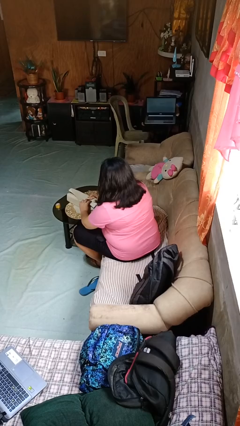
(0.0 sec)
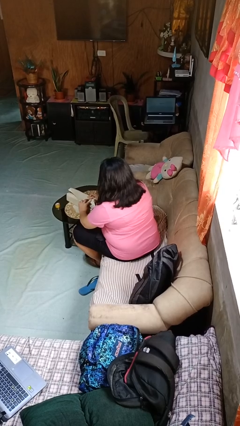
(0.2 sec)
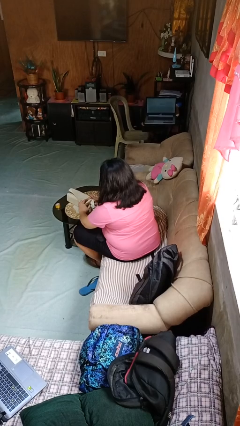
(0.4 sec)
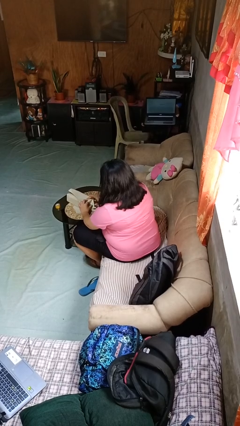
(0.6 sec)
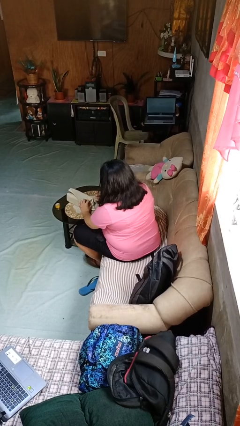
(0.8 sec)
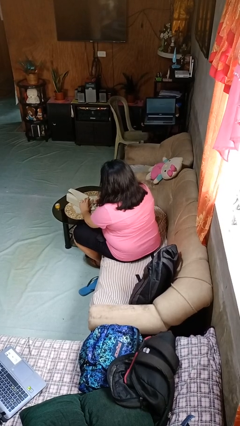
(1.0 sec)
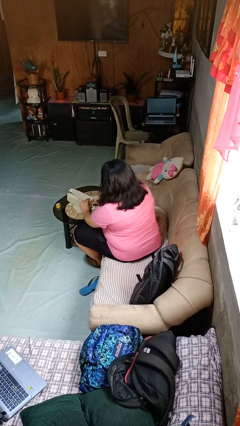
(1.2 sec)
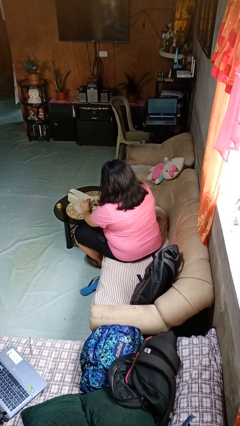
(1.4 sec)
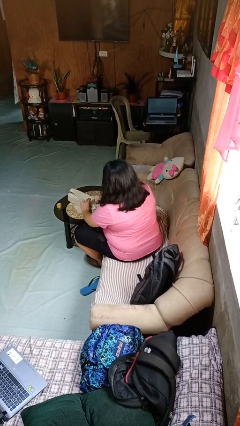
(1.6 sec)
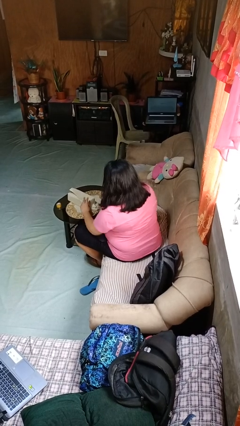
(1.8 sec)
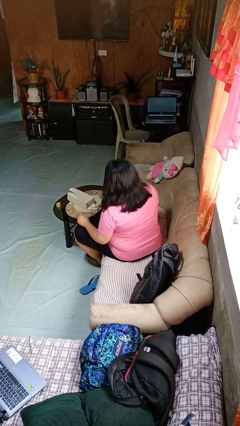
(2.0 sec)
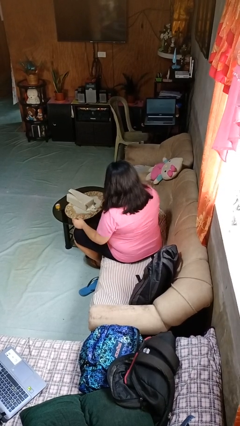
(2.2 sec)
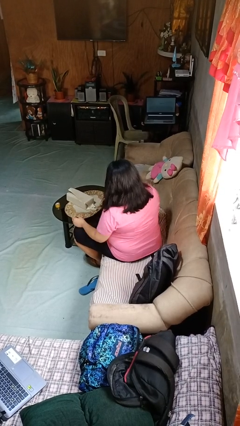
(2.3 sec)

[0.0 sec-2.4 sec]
person wraps box

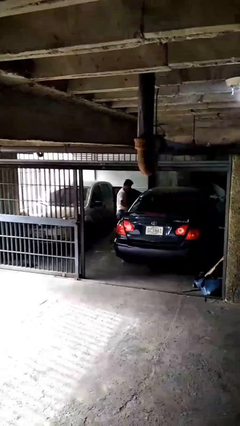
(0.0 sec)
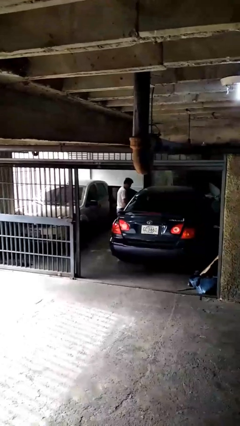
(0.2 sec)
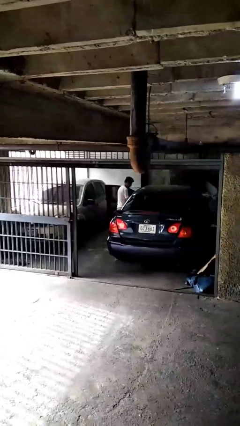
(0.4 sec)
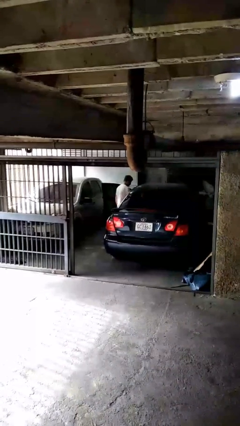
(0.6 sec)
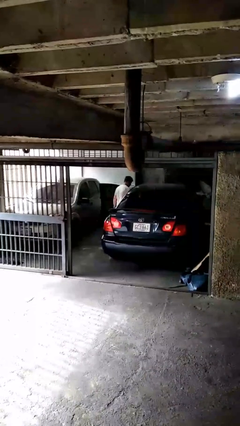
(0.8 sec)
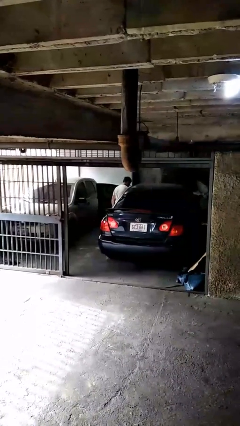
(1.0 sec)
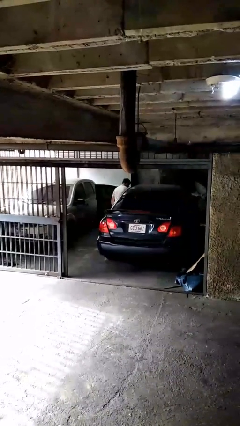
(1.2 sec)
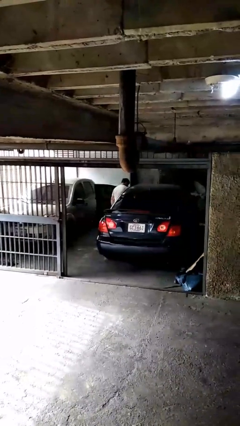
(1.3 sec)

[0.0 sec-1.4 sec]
person enters car

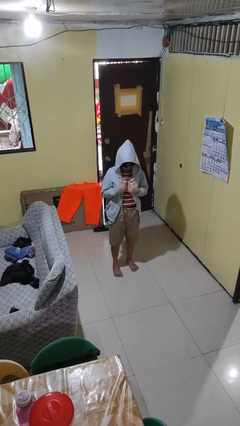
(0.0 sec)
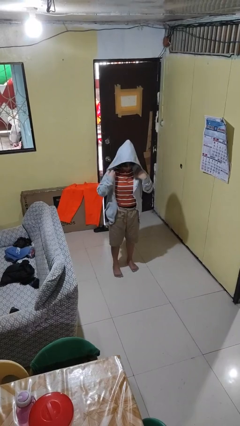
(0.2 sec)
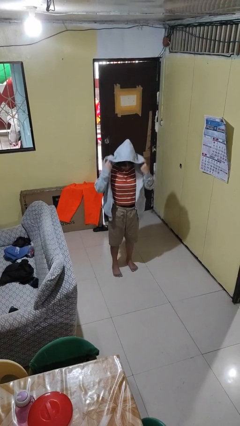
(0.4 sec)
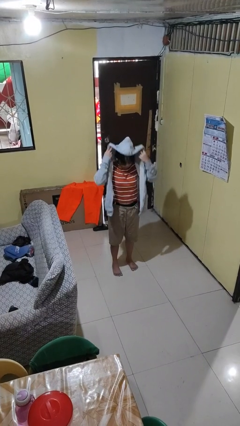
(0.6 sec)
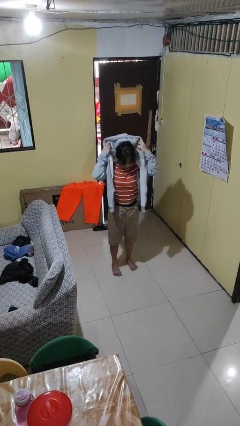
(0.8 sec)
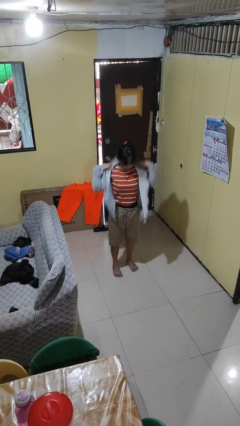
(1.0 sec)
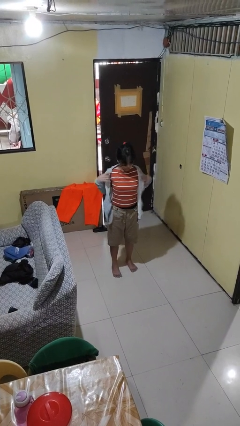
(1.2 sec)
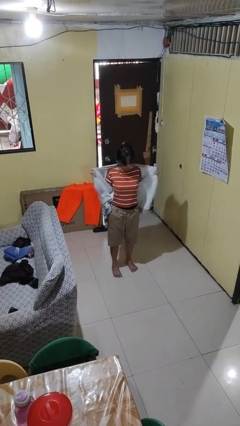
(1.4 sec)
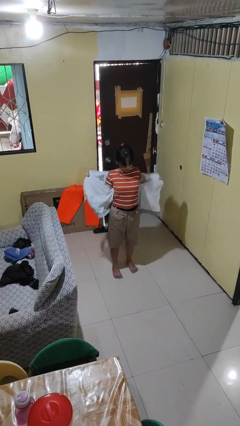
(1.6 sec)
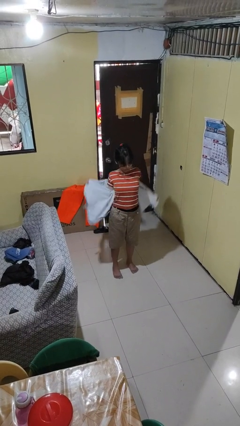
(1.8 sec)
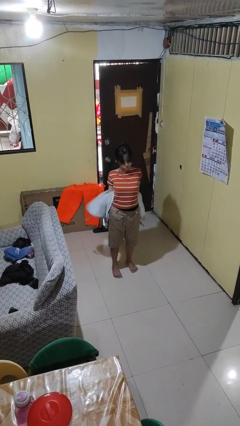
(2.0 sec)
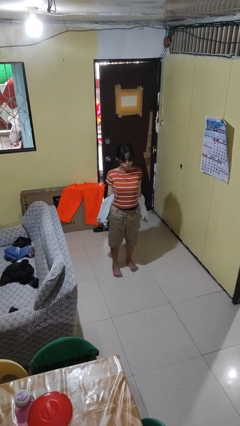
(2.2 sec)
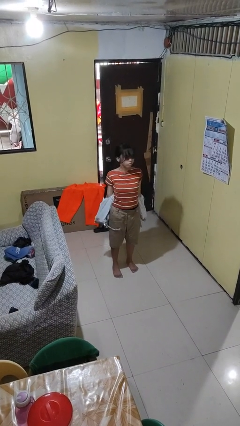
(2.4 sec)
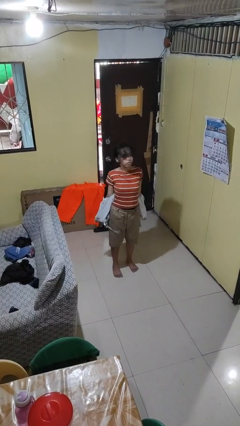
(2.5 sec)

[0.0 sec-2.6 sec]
person takes off hoodie

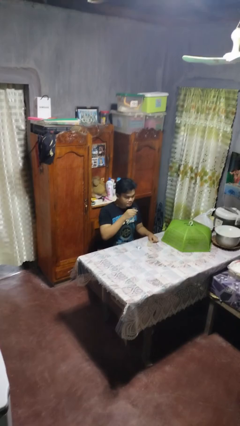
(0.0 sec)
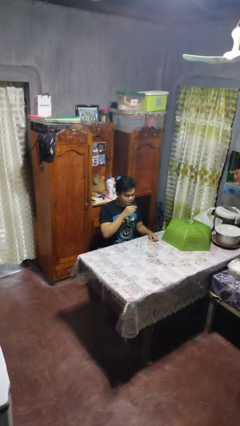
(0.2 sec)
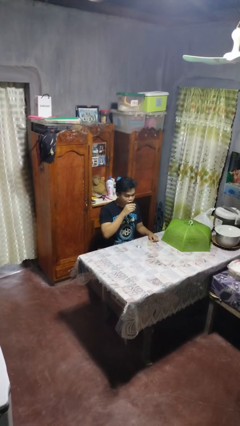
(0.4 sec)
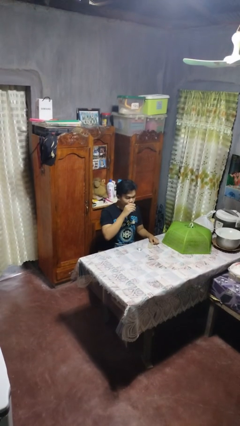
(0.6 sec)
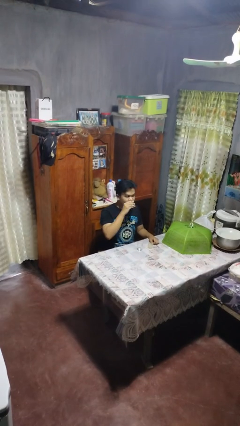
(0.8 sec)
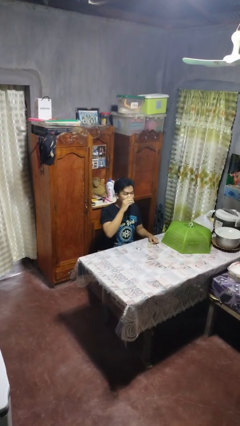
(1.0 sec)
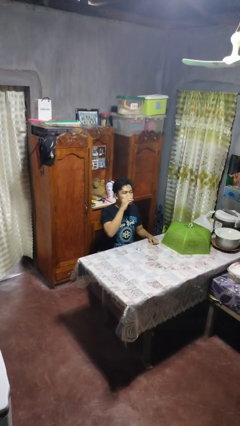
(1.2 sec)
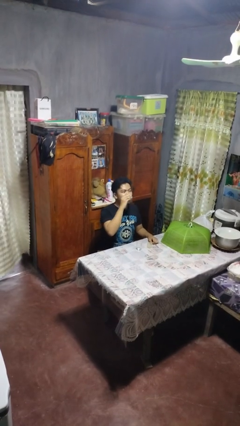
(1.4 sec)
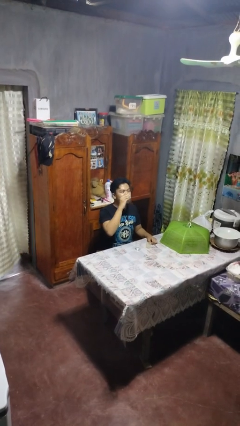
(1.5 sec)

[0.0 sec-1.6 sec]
person drinks from shotglass

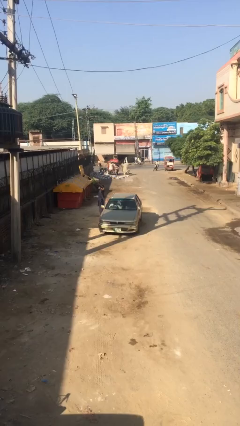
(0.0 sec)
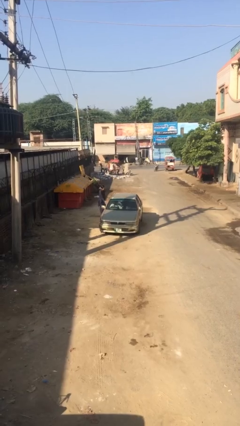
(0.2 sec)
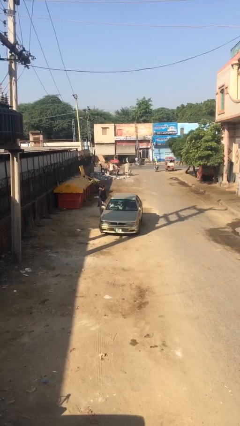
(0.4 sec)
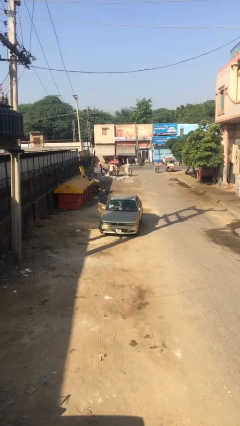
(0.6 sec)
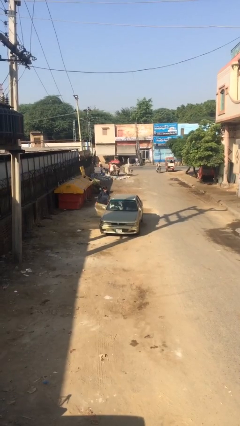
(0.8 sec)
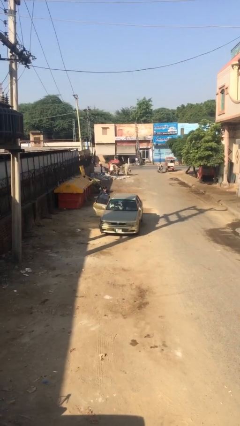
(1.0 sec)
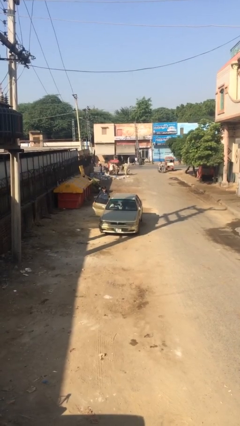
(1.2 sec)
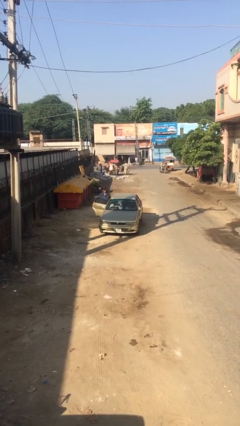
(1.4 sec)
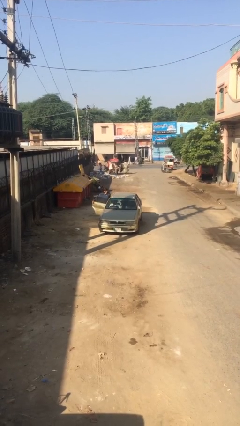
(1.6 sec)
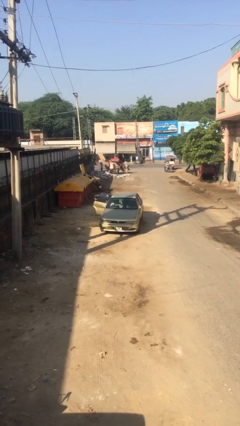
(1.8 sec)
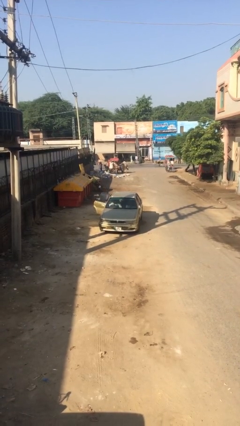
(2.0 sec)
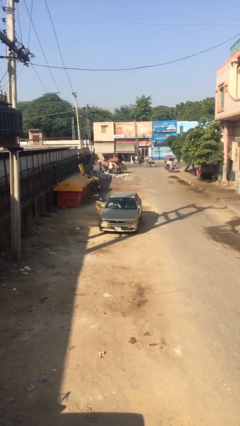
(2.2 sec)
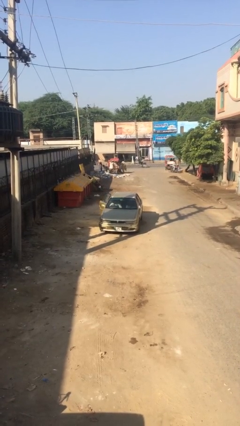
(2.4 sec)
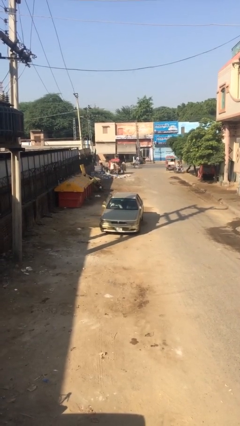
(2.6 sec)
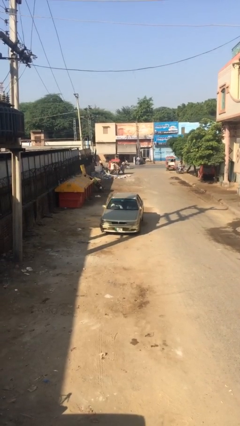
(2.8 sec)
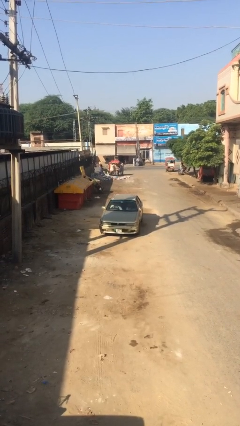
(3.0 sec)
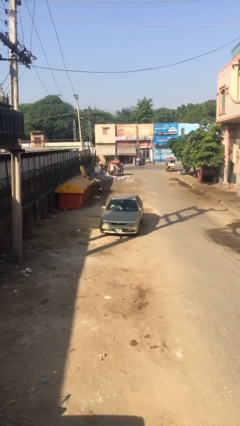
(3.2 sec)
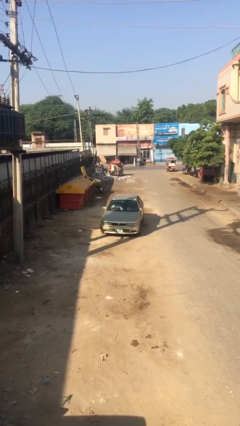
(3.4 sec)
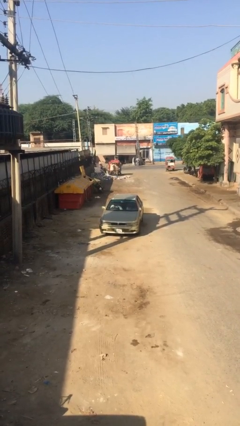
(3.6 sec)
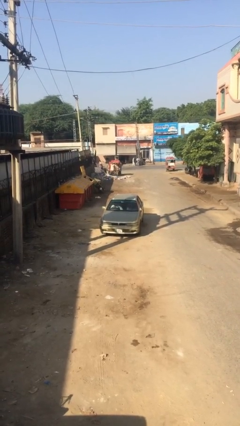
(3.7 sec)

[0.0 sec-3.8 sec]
car picks up person

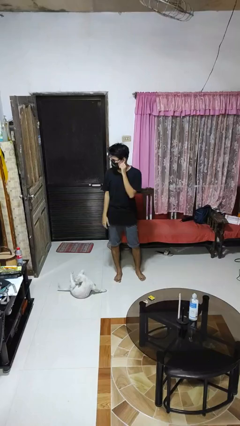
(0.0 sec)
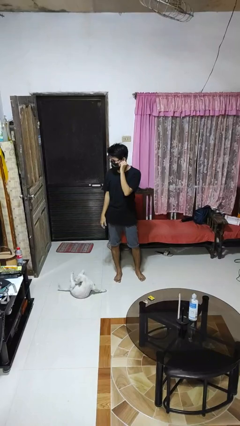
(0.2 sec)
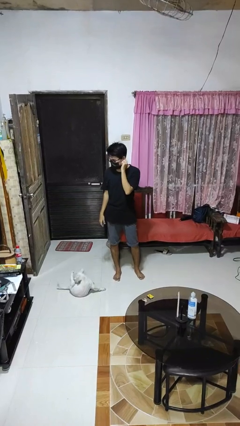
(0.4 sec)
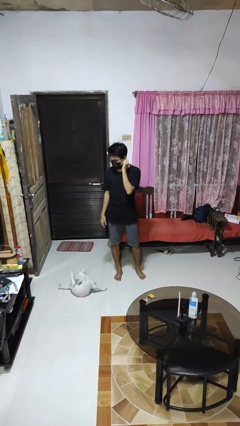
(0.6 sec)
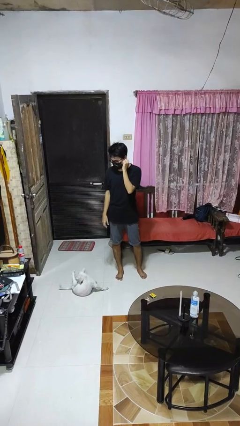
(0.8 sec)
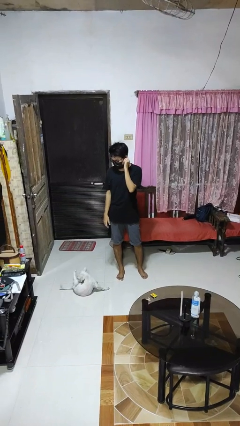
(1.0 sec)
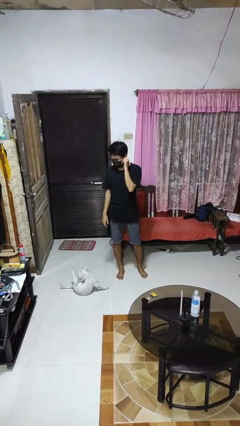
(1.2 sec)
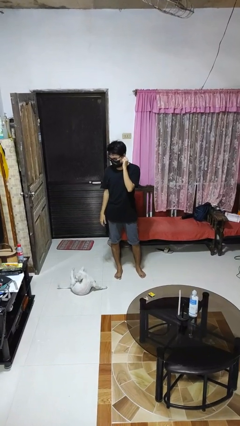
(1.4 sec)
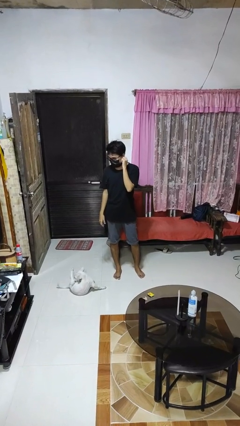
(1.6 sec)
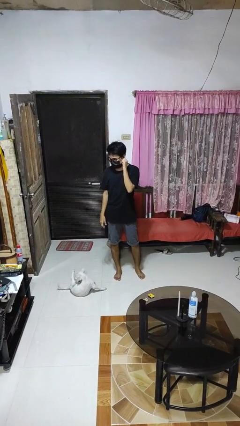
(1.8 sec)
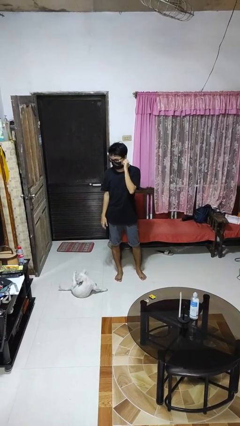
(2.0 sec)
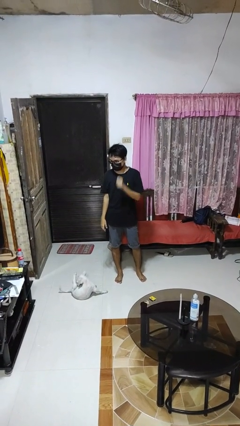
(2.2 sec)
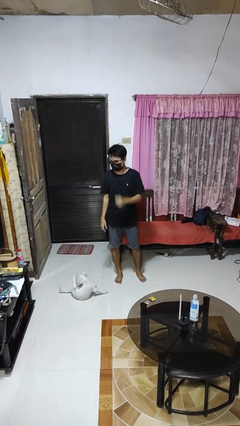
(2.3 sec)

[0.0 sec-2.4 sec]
person touches earlobe

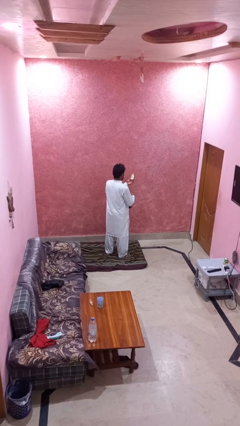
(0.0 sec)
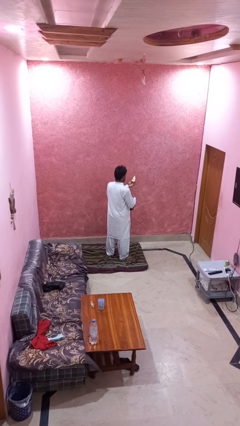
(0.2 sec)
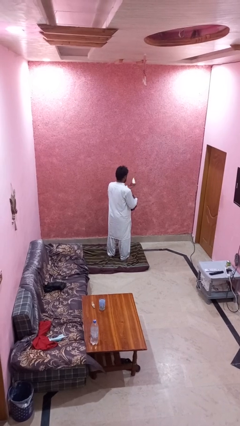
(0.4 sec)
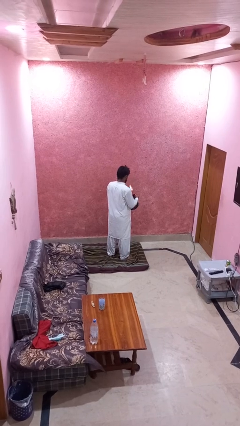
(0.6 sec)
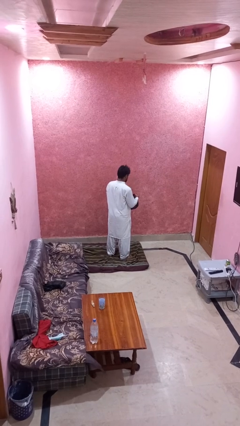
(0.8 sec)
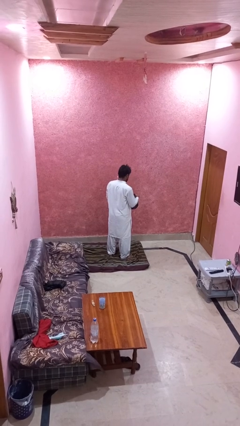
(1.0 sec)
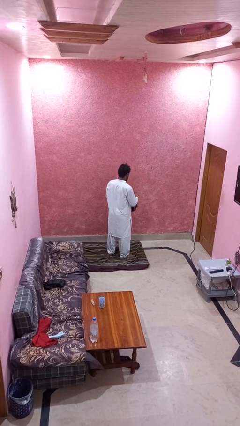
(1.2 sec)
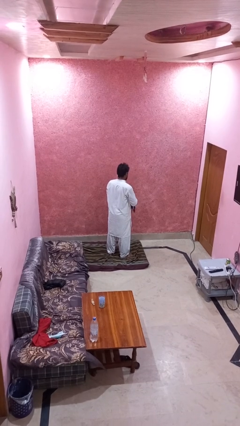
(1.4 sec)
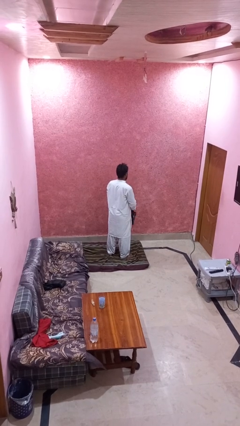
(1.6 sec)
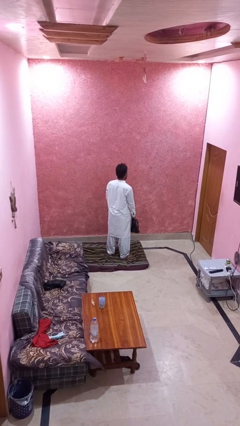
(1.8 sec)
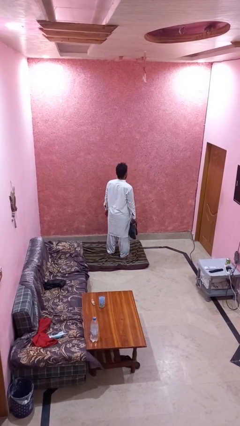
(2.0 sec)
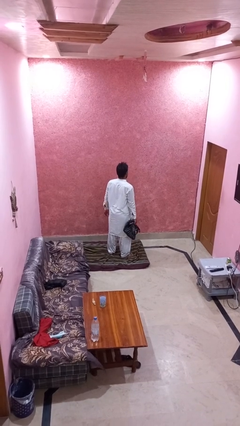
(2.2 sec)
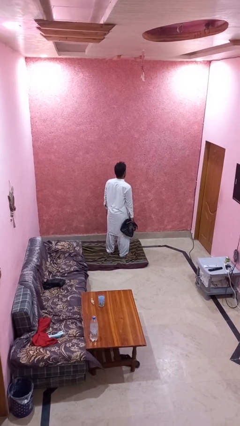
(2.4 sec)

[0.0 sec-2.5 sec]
person puts object into purse

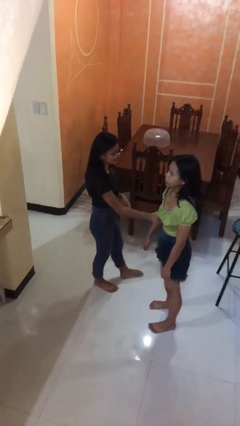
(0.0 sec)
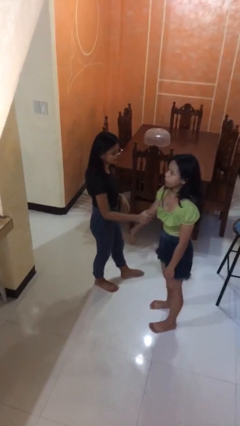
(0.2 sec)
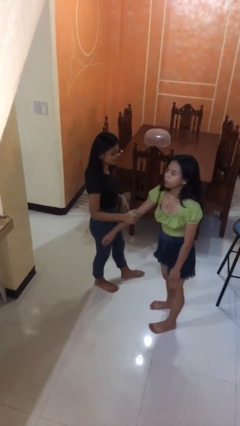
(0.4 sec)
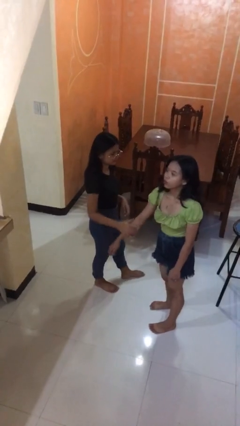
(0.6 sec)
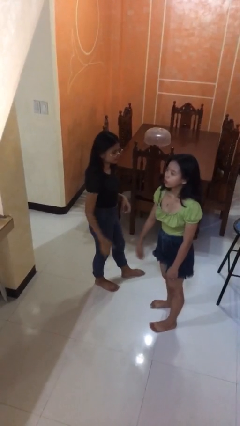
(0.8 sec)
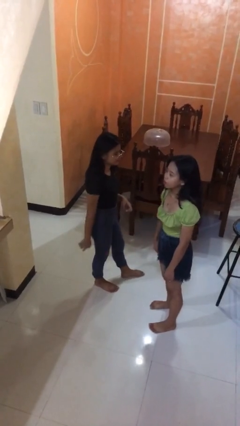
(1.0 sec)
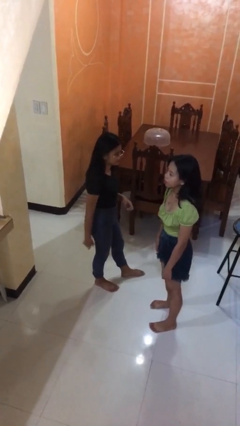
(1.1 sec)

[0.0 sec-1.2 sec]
person grabs person by forearm
